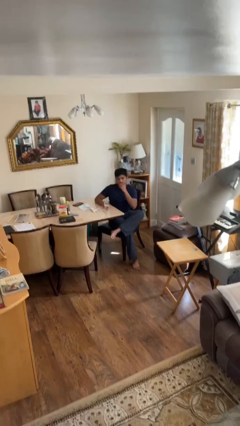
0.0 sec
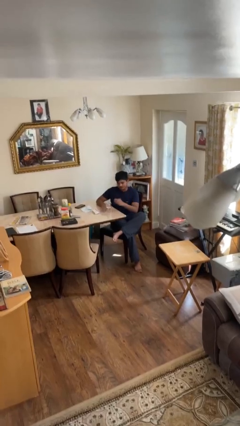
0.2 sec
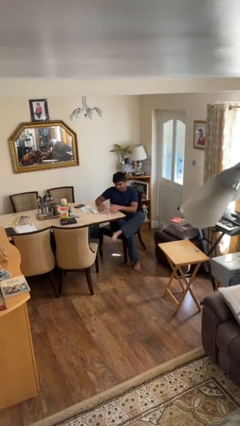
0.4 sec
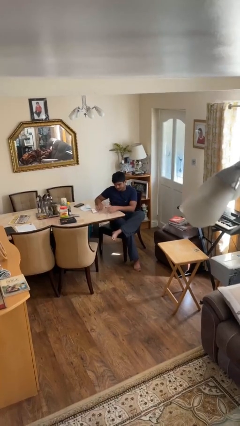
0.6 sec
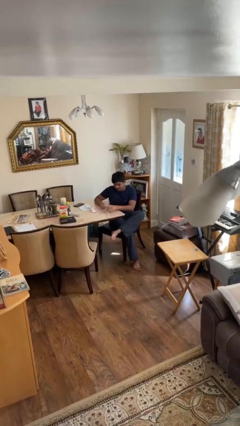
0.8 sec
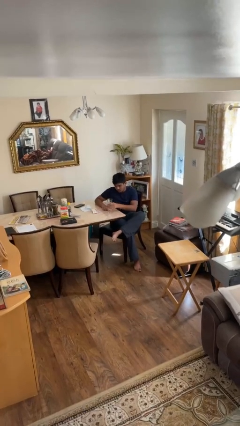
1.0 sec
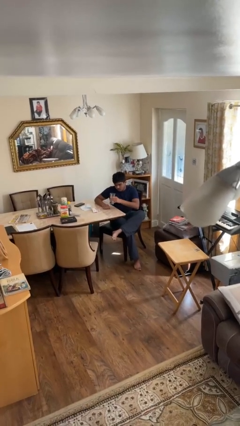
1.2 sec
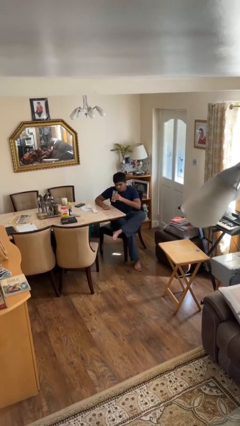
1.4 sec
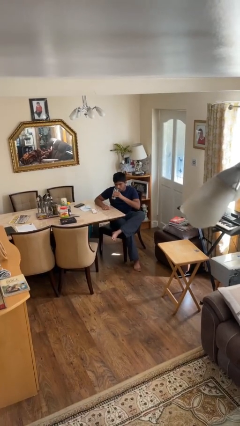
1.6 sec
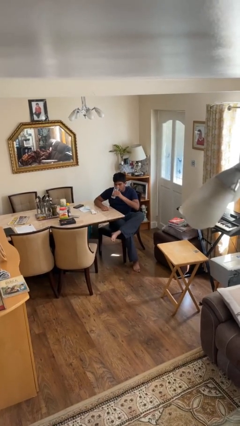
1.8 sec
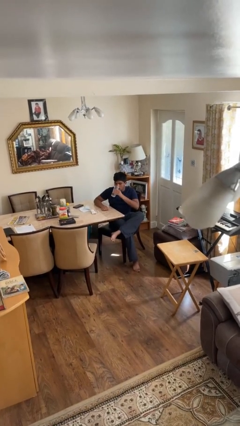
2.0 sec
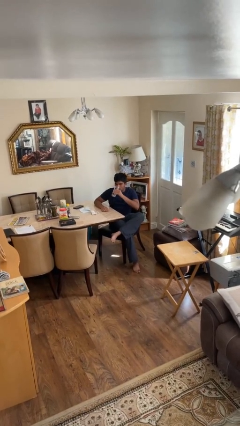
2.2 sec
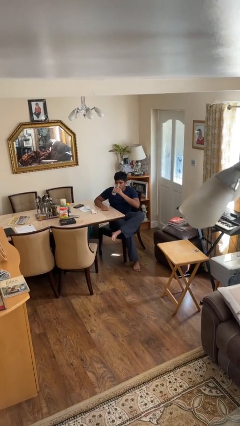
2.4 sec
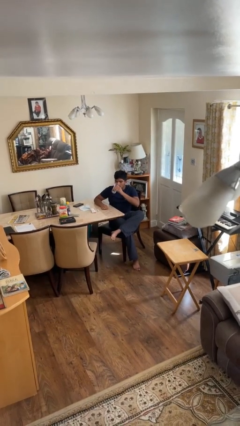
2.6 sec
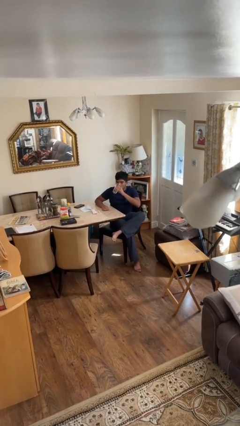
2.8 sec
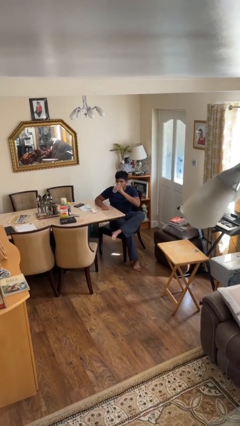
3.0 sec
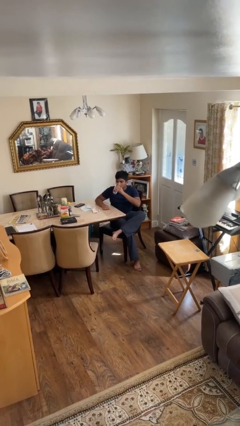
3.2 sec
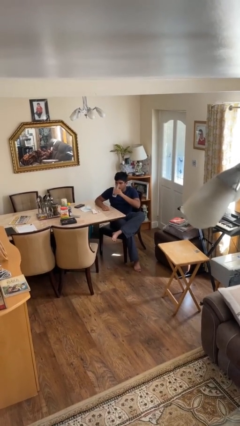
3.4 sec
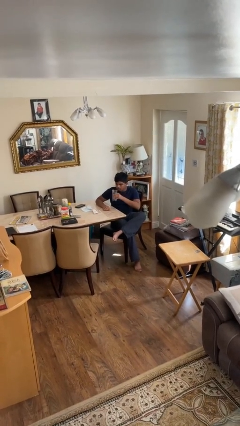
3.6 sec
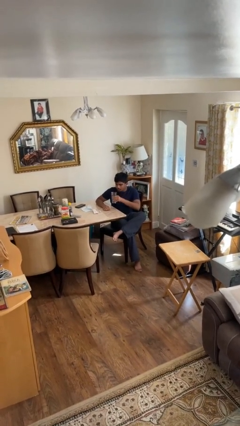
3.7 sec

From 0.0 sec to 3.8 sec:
person drinks from cup

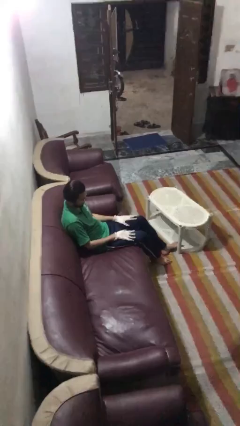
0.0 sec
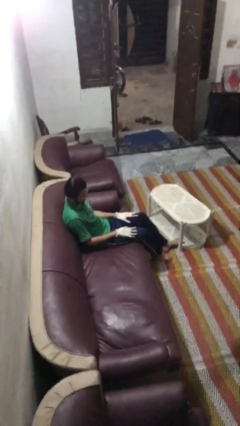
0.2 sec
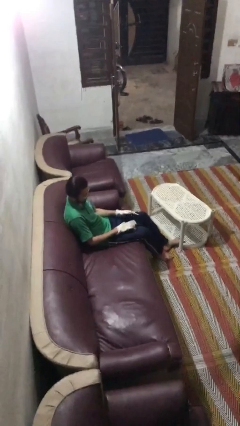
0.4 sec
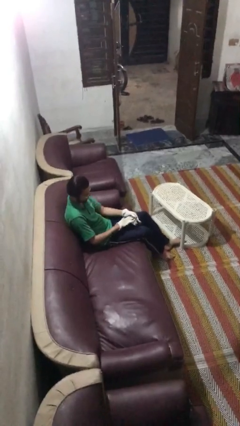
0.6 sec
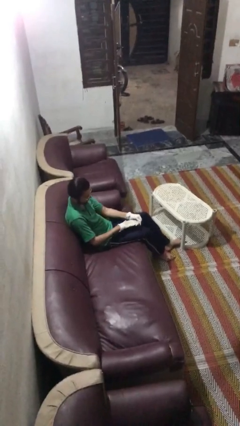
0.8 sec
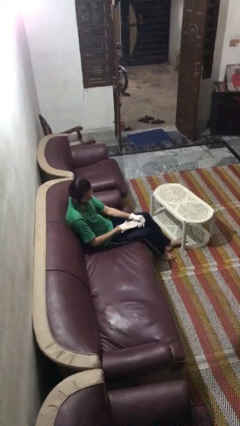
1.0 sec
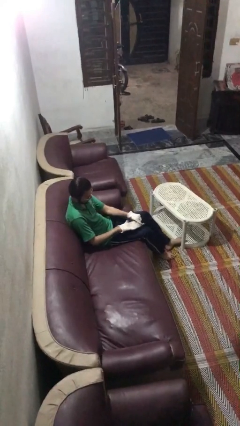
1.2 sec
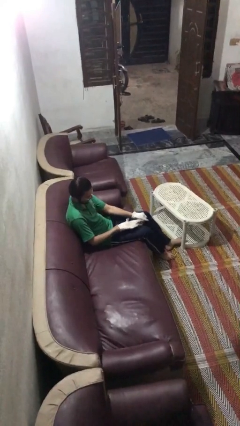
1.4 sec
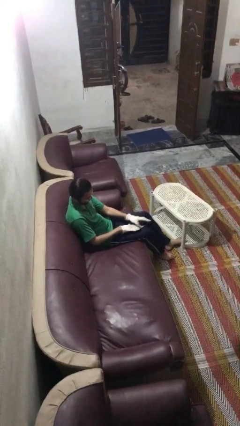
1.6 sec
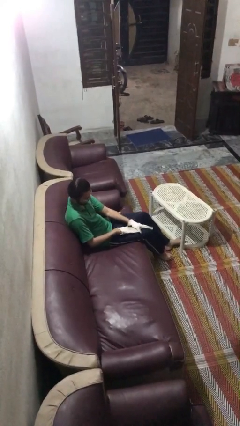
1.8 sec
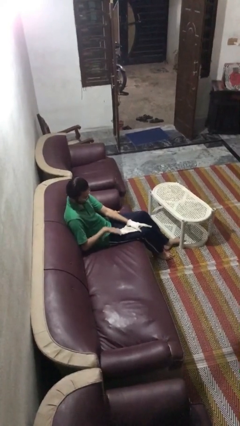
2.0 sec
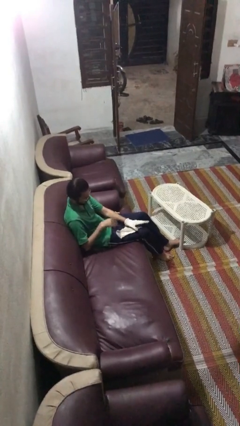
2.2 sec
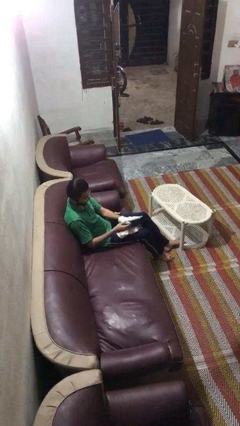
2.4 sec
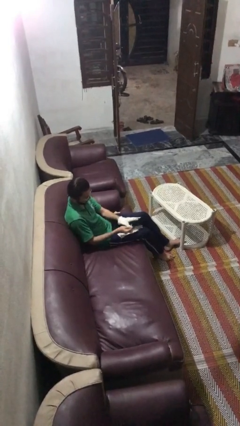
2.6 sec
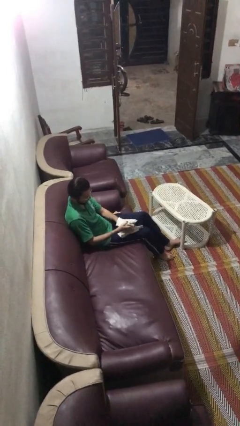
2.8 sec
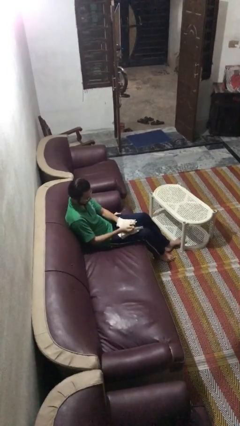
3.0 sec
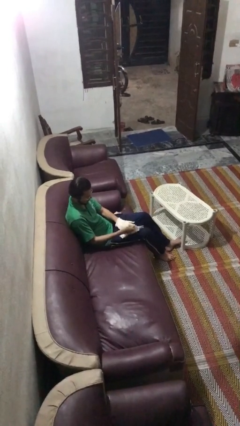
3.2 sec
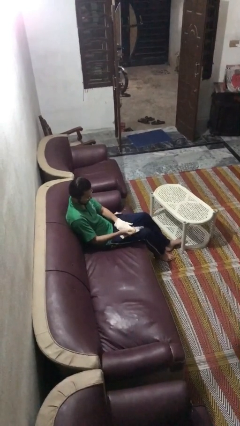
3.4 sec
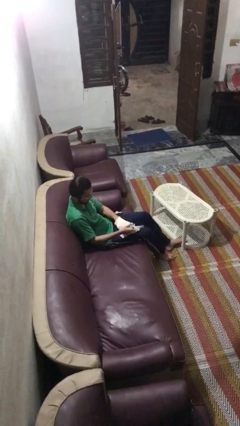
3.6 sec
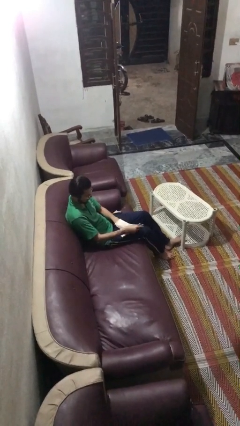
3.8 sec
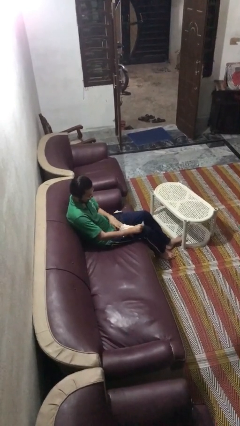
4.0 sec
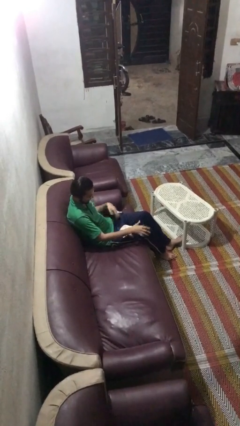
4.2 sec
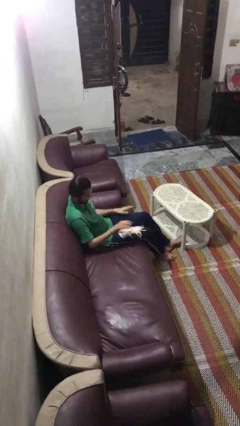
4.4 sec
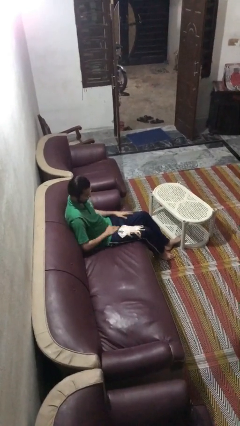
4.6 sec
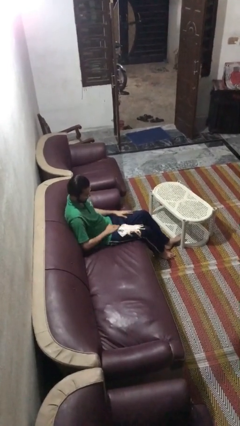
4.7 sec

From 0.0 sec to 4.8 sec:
person takes off gloves

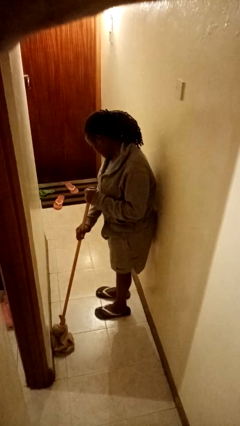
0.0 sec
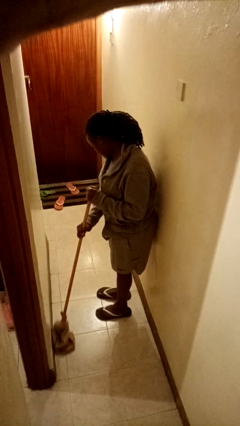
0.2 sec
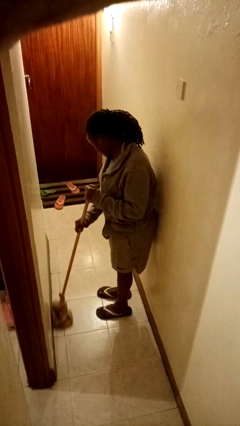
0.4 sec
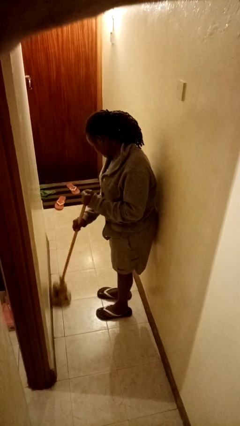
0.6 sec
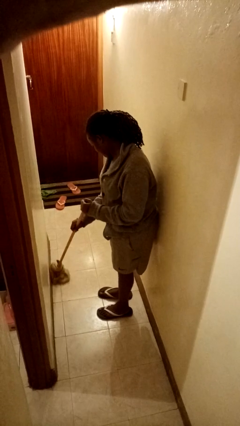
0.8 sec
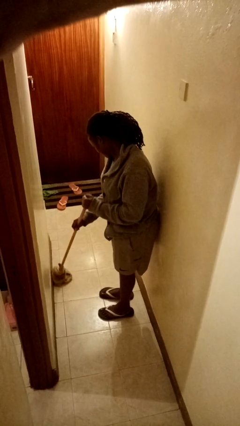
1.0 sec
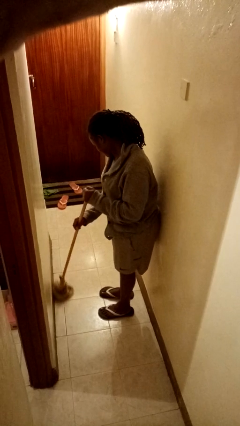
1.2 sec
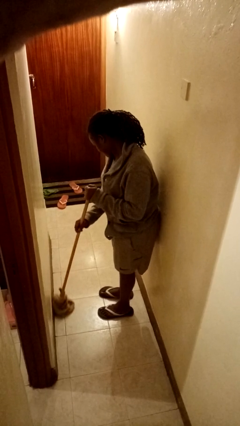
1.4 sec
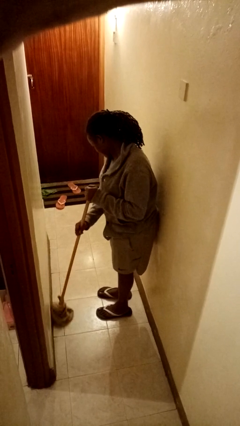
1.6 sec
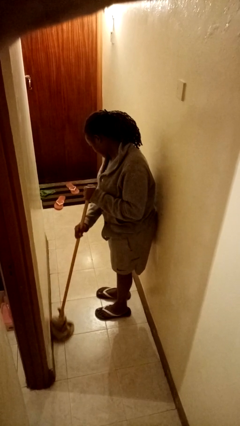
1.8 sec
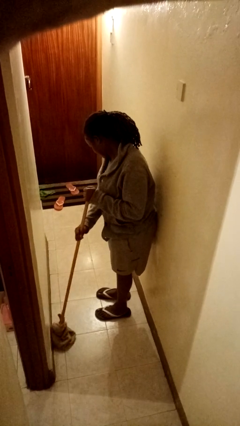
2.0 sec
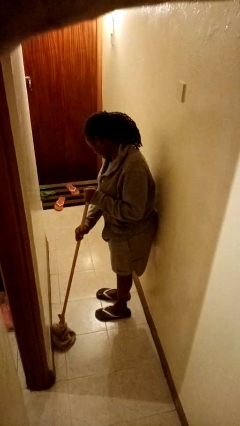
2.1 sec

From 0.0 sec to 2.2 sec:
person mops

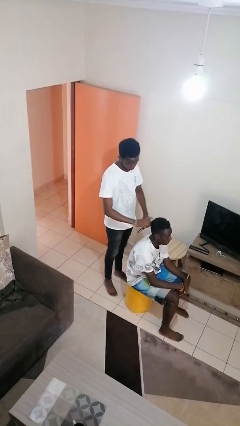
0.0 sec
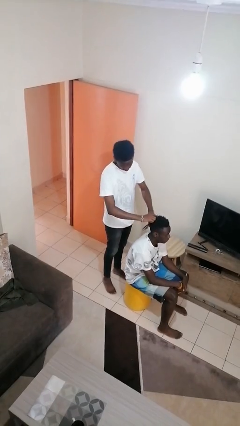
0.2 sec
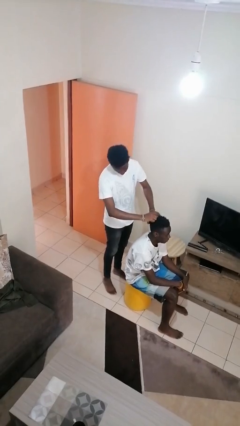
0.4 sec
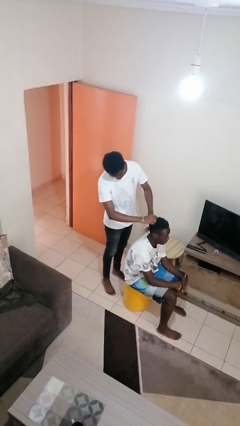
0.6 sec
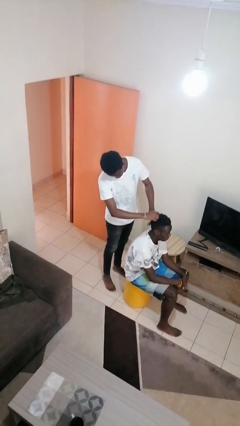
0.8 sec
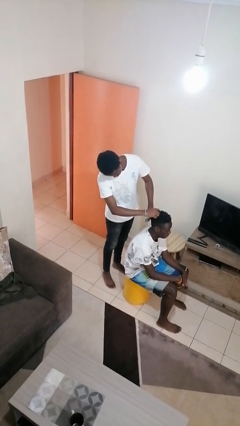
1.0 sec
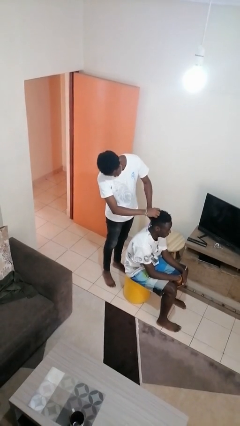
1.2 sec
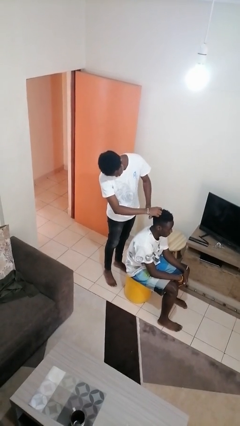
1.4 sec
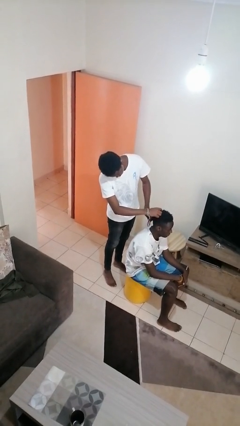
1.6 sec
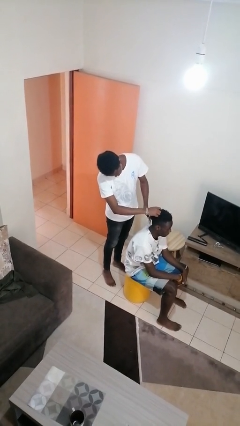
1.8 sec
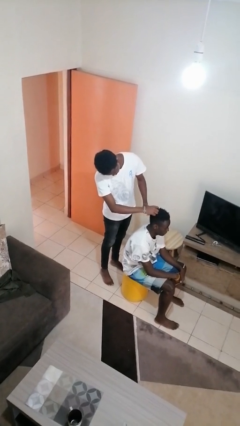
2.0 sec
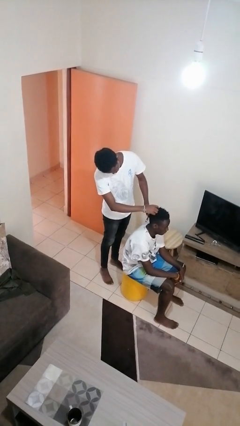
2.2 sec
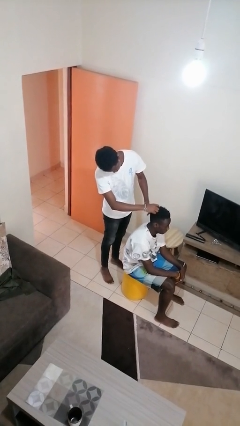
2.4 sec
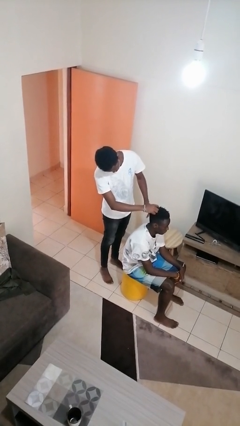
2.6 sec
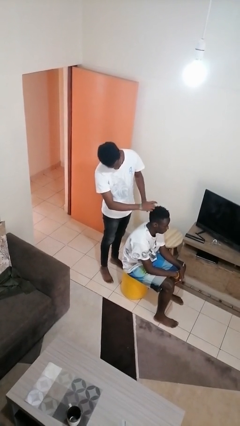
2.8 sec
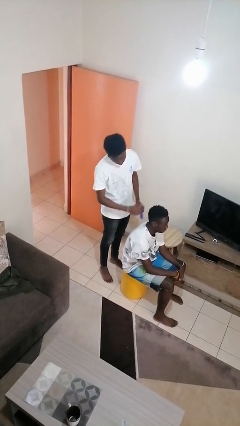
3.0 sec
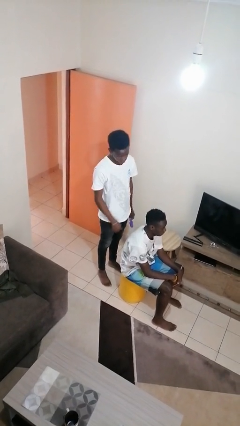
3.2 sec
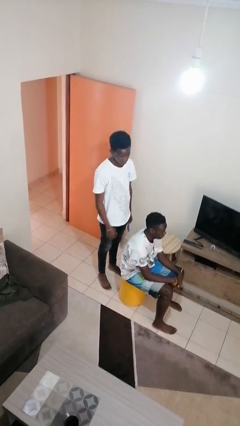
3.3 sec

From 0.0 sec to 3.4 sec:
person brushes hair of person

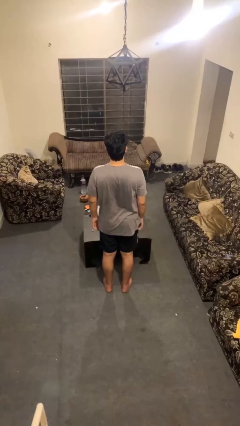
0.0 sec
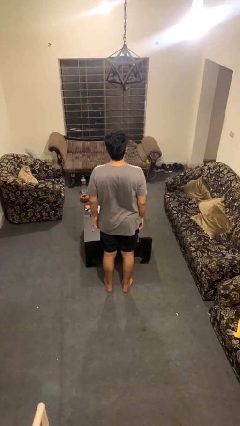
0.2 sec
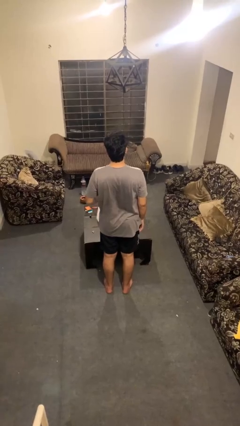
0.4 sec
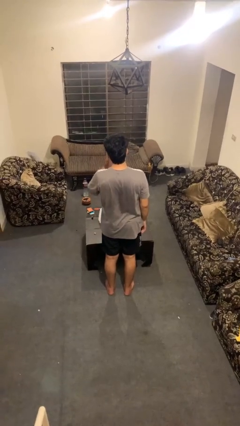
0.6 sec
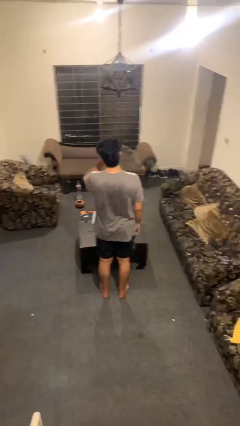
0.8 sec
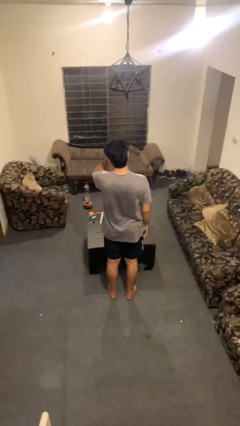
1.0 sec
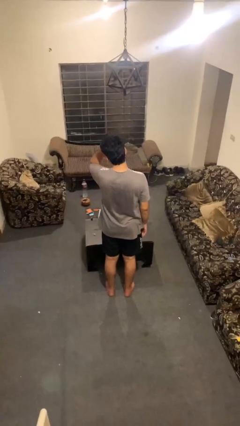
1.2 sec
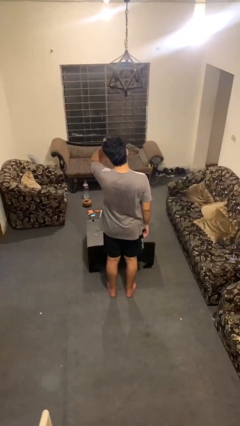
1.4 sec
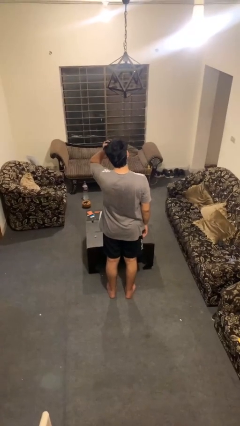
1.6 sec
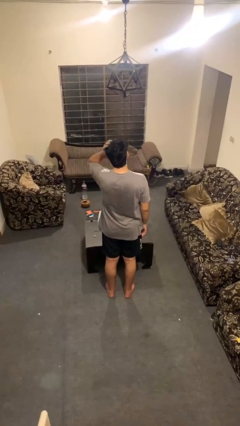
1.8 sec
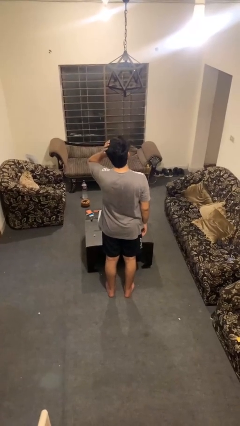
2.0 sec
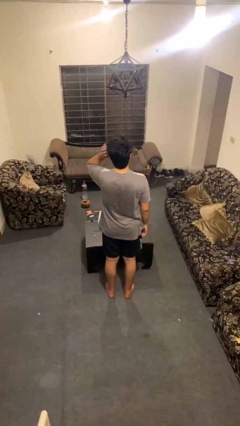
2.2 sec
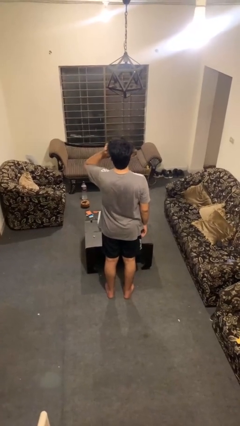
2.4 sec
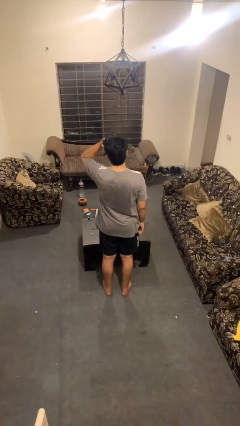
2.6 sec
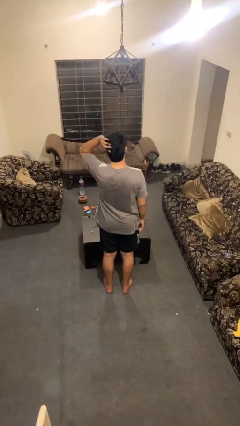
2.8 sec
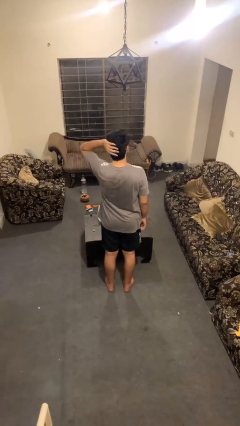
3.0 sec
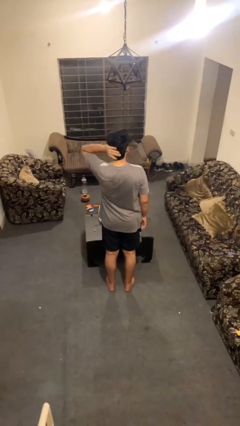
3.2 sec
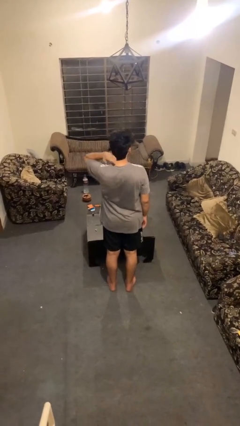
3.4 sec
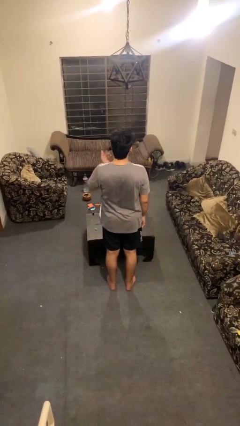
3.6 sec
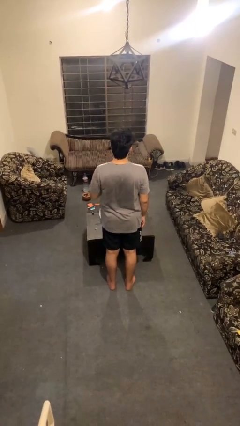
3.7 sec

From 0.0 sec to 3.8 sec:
person strokes hair
